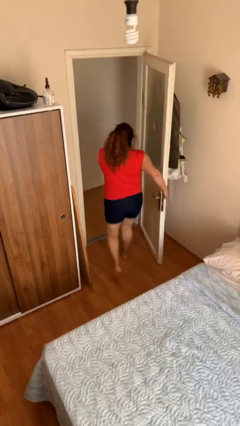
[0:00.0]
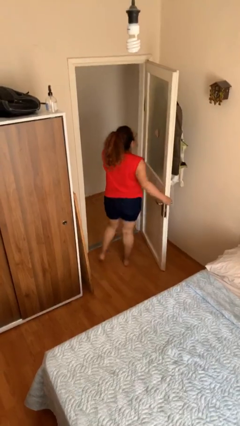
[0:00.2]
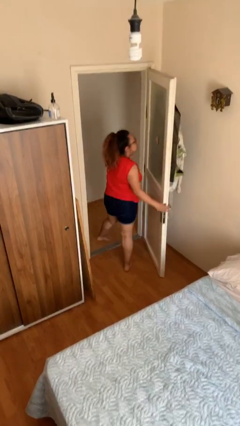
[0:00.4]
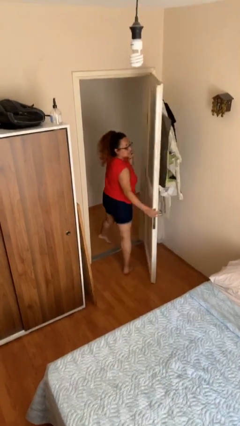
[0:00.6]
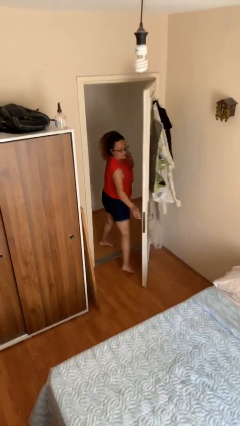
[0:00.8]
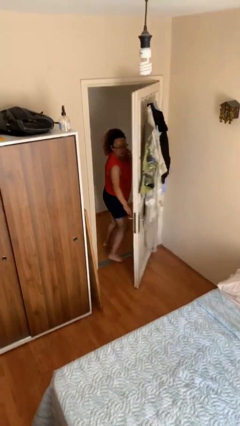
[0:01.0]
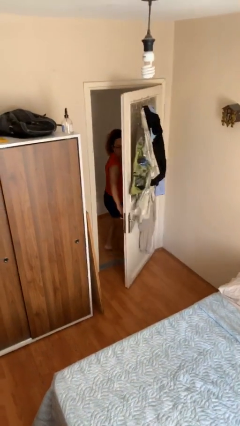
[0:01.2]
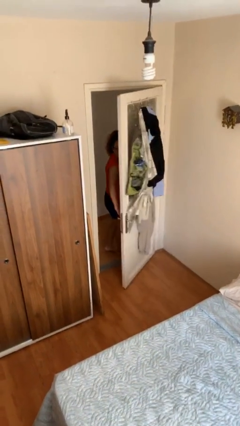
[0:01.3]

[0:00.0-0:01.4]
person exits scene through structure

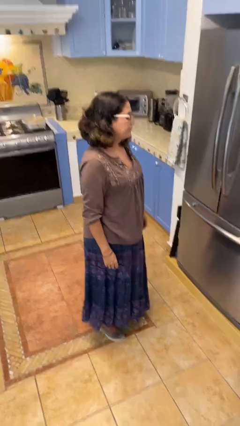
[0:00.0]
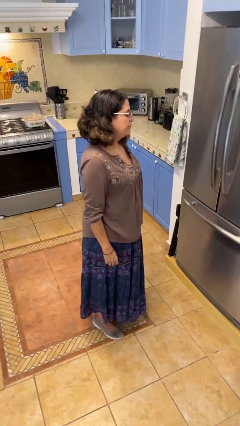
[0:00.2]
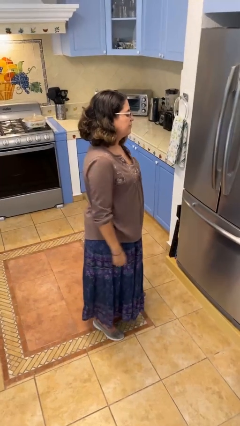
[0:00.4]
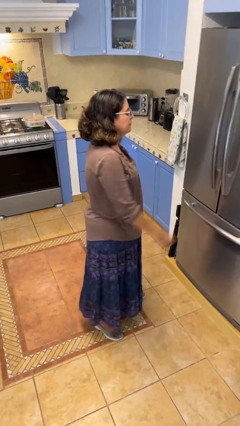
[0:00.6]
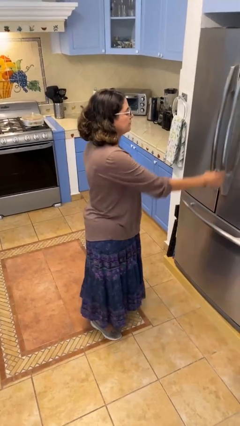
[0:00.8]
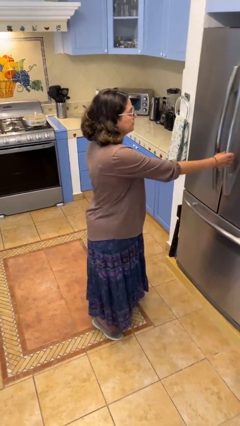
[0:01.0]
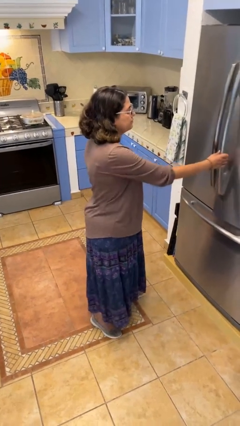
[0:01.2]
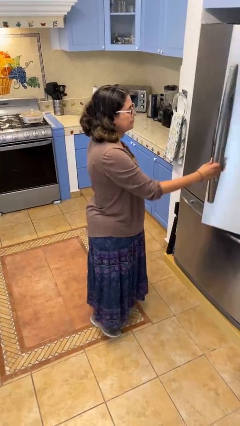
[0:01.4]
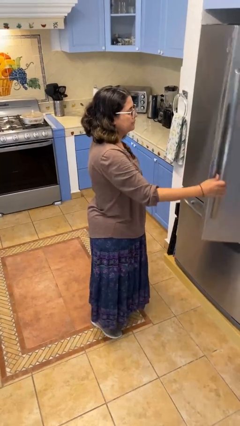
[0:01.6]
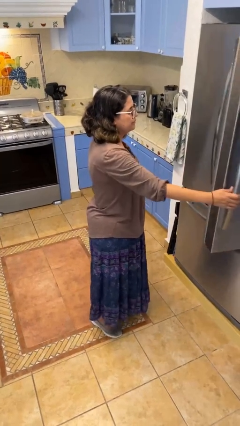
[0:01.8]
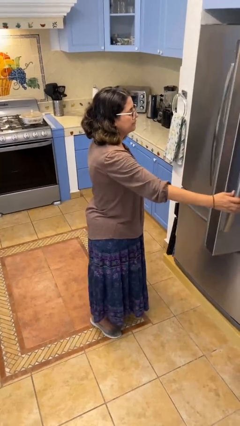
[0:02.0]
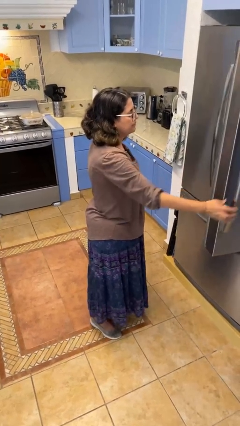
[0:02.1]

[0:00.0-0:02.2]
person opens refrigerator

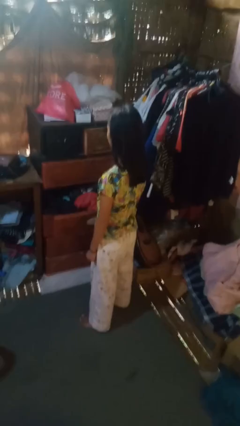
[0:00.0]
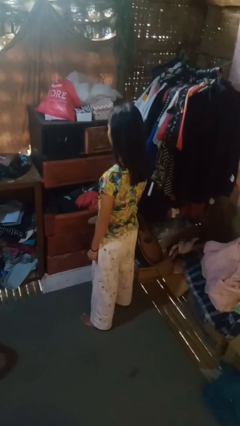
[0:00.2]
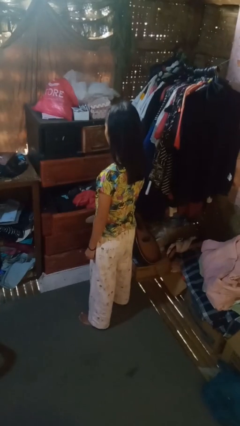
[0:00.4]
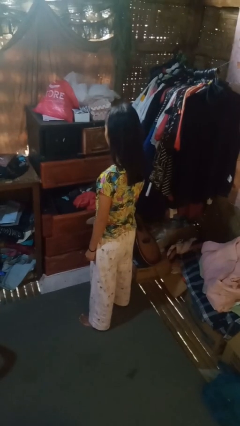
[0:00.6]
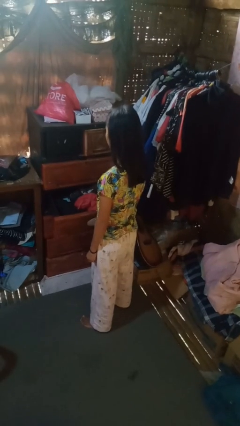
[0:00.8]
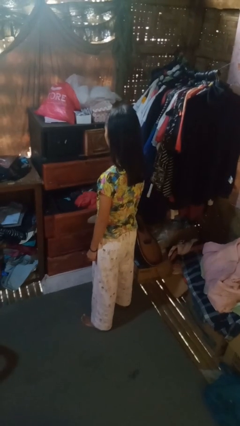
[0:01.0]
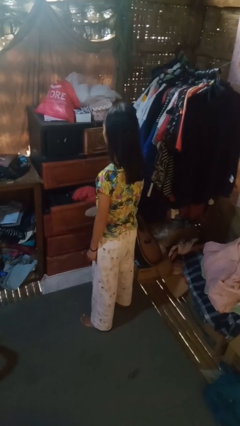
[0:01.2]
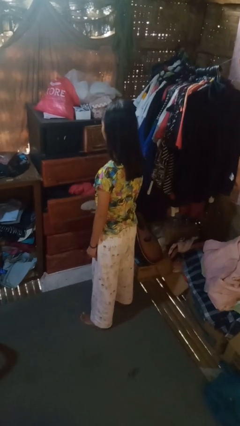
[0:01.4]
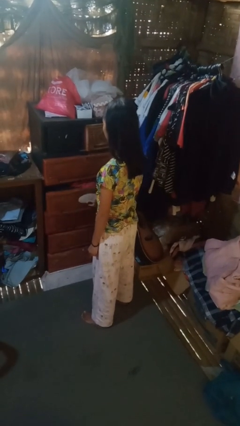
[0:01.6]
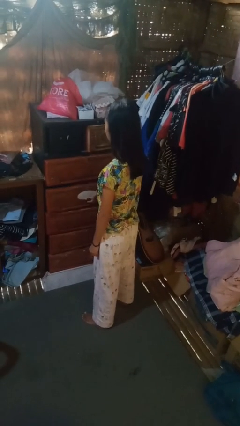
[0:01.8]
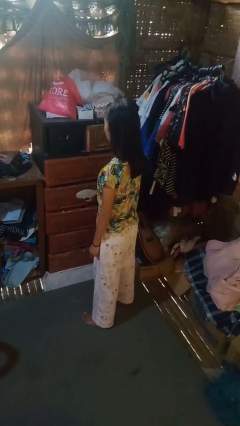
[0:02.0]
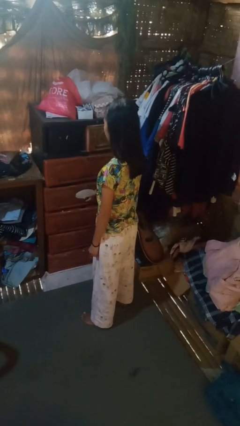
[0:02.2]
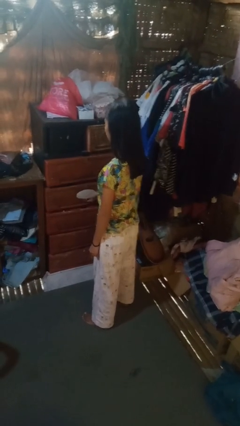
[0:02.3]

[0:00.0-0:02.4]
person closes dresser drawer

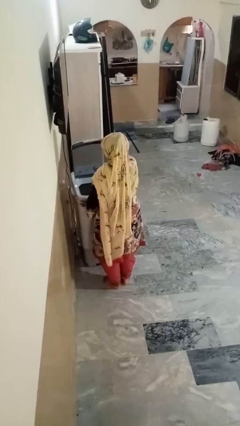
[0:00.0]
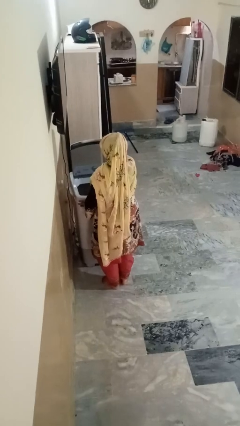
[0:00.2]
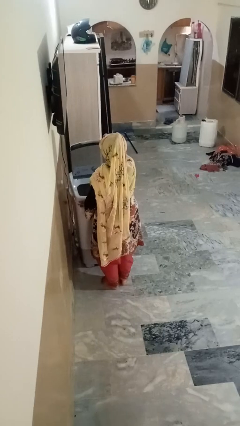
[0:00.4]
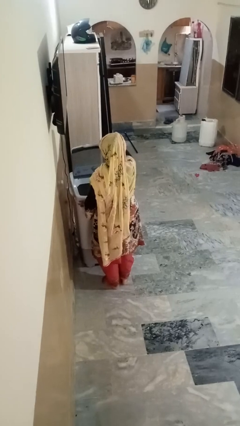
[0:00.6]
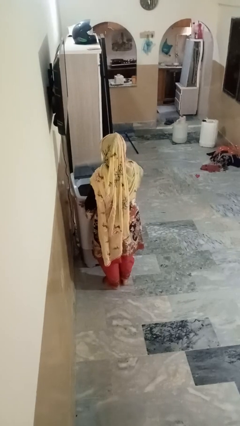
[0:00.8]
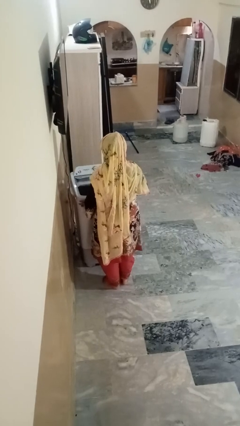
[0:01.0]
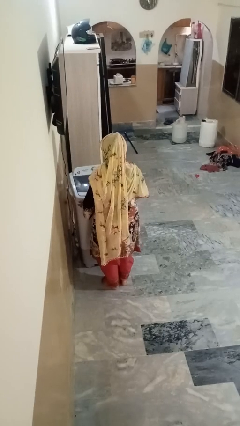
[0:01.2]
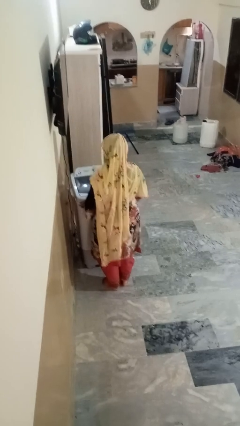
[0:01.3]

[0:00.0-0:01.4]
person closes clothes washer

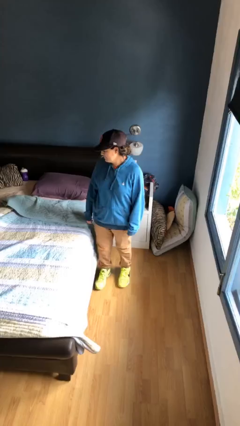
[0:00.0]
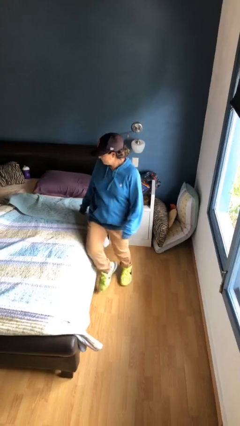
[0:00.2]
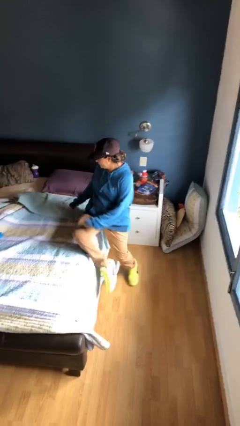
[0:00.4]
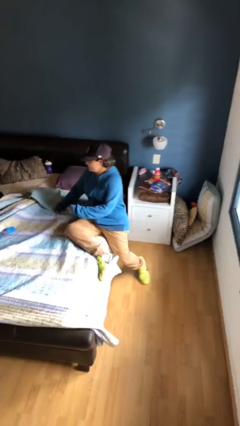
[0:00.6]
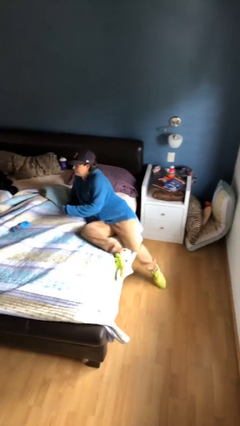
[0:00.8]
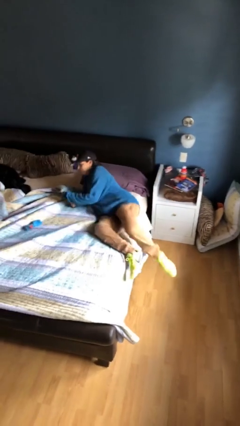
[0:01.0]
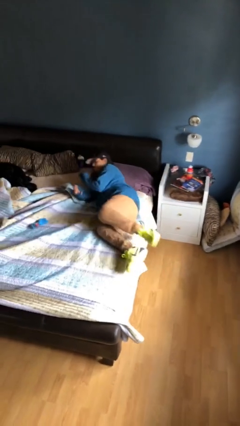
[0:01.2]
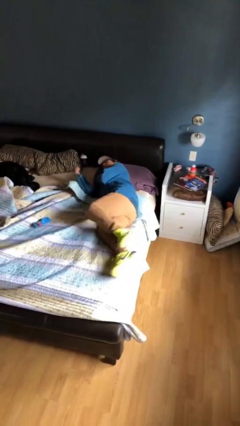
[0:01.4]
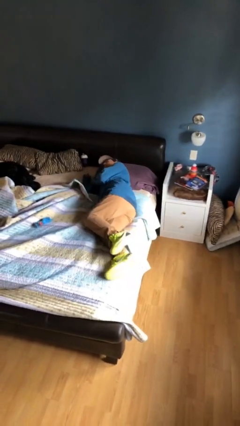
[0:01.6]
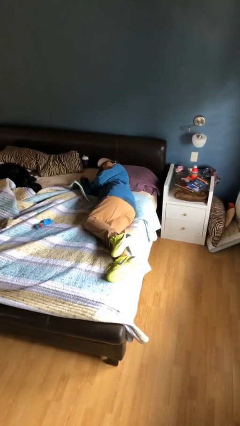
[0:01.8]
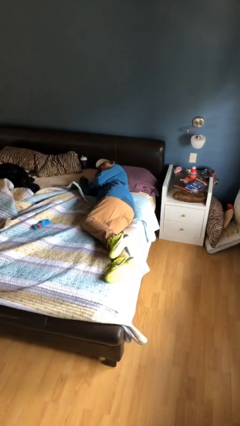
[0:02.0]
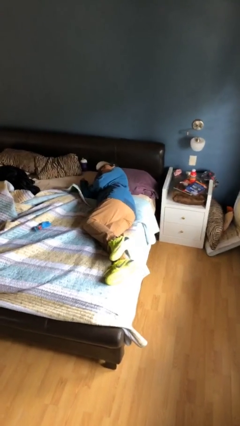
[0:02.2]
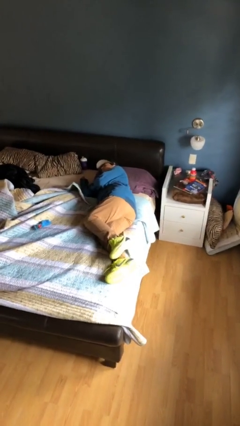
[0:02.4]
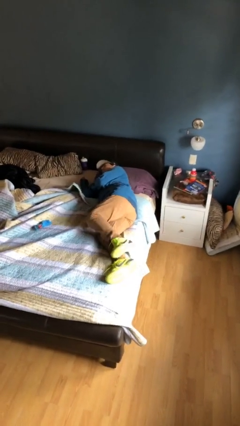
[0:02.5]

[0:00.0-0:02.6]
person lies down on bed

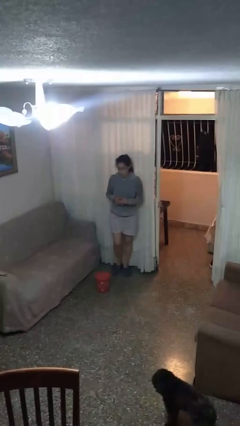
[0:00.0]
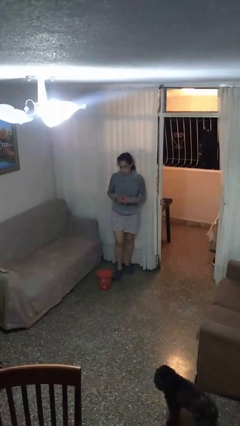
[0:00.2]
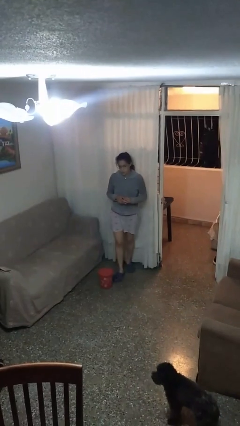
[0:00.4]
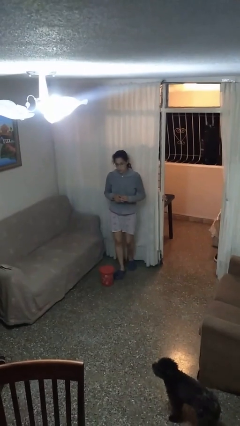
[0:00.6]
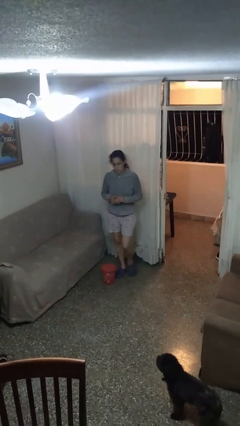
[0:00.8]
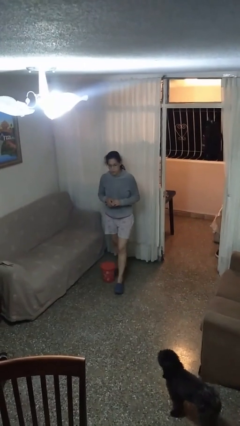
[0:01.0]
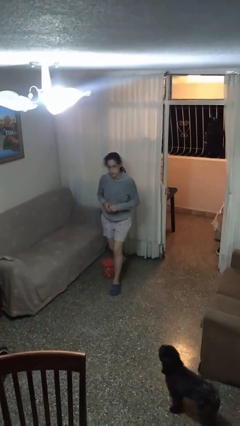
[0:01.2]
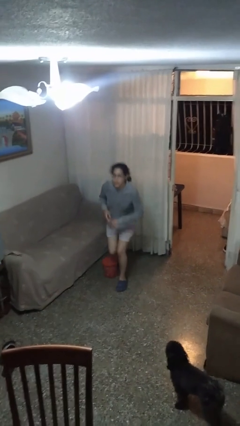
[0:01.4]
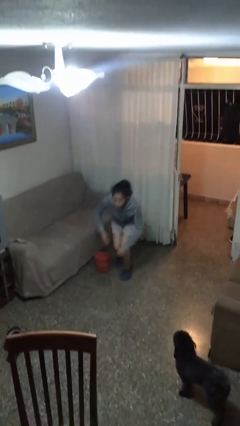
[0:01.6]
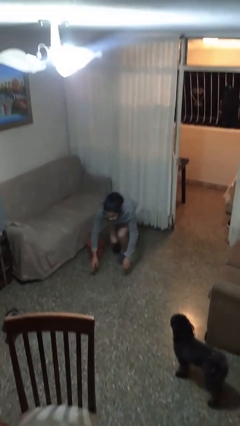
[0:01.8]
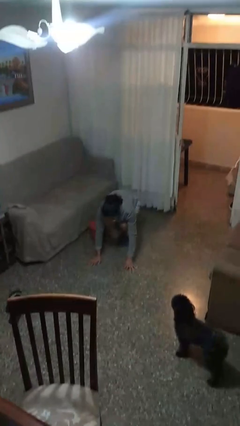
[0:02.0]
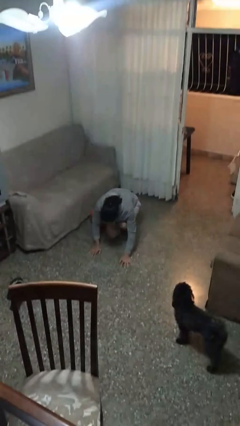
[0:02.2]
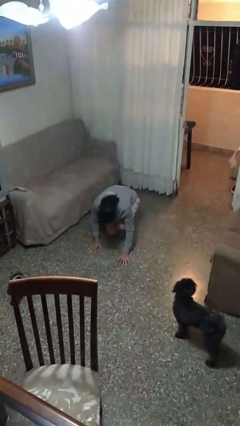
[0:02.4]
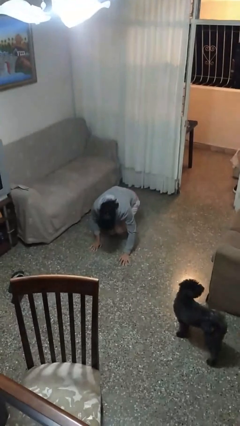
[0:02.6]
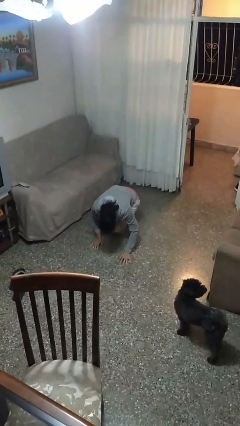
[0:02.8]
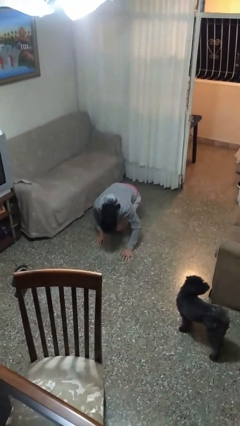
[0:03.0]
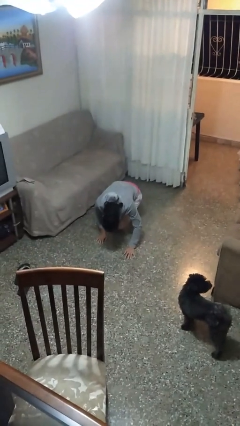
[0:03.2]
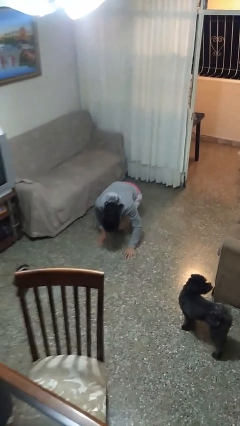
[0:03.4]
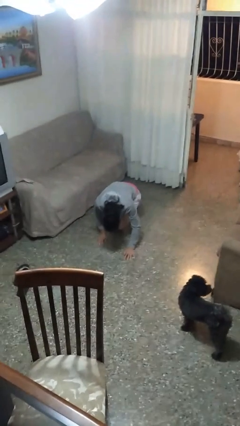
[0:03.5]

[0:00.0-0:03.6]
person trips on object on floor

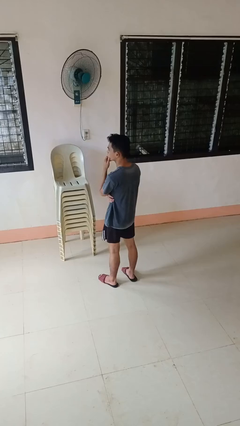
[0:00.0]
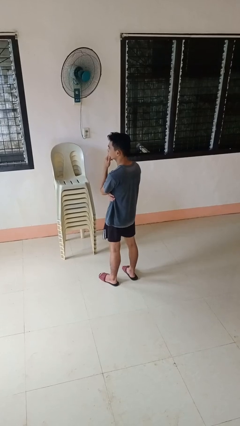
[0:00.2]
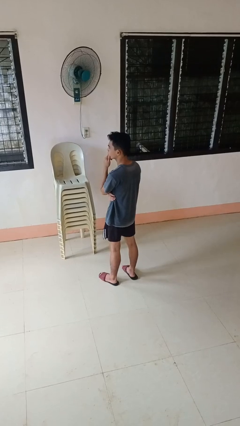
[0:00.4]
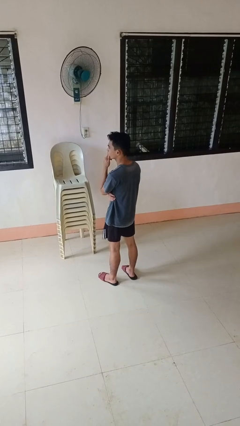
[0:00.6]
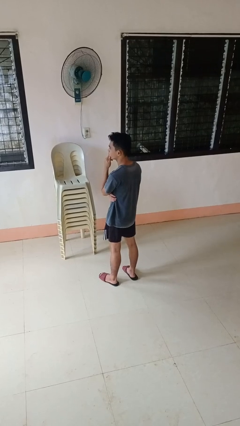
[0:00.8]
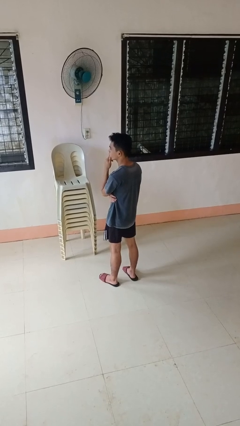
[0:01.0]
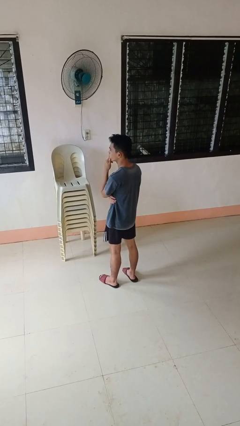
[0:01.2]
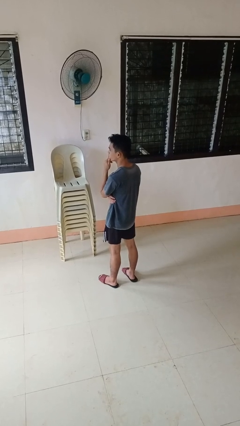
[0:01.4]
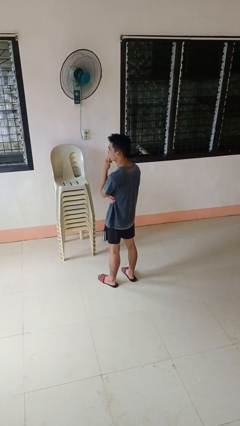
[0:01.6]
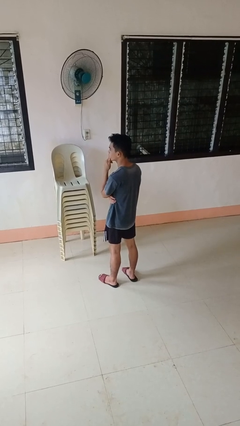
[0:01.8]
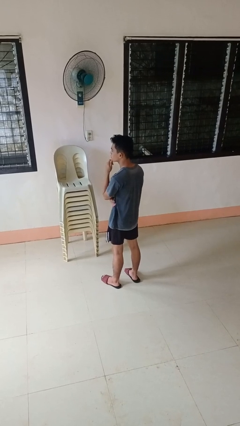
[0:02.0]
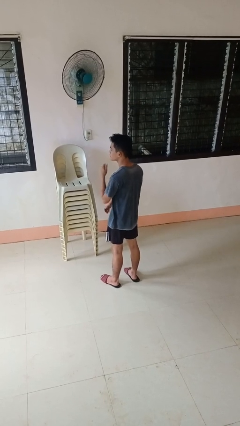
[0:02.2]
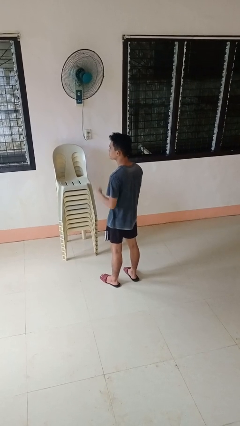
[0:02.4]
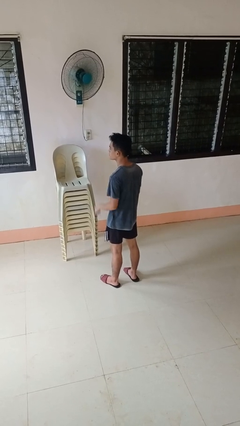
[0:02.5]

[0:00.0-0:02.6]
person strokes chin

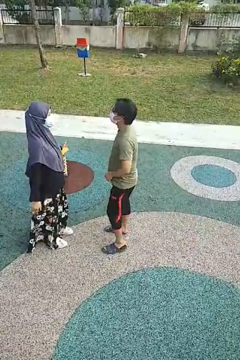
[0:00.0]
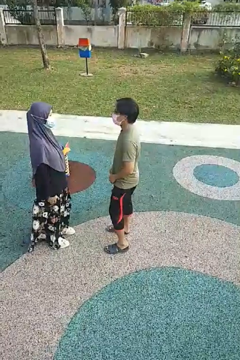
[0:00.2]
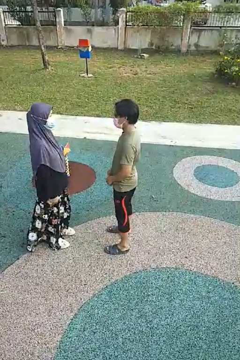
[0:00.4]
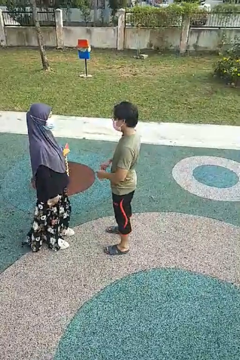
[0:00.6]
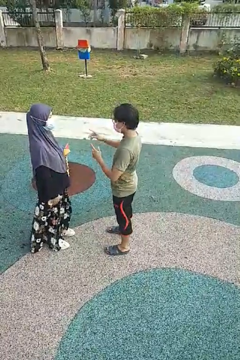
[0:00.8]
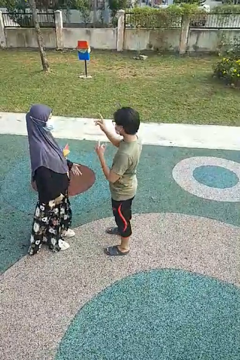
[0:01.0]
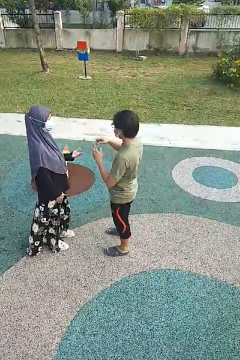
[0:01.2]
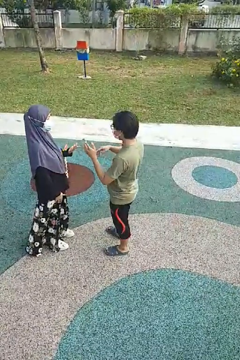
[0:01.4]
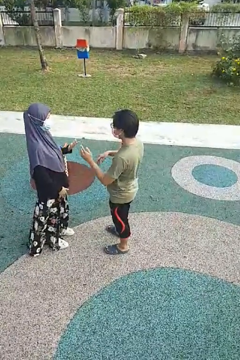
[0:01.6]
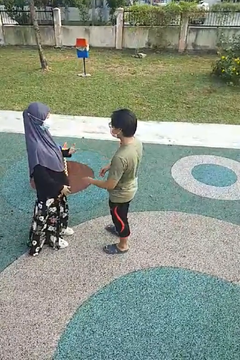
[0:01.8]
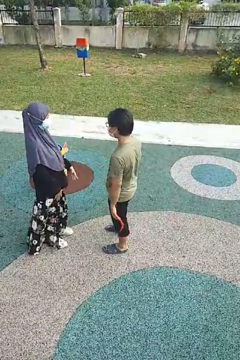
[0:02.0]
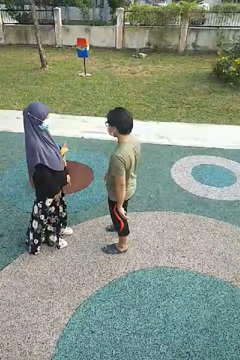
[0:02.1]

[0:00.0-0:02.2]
person talks to person
